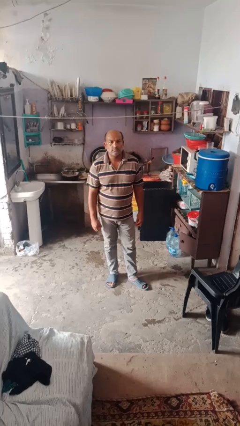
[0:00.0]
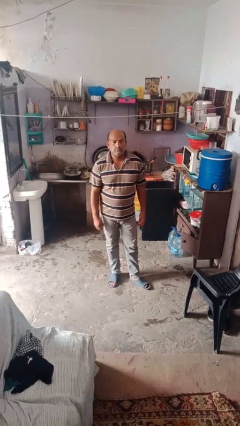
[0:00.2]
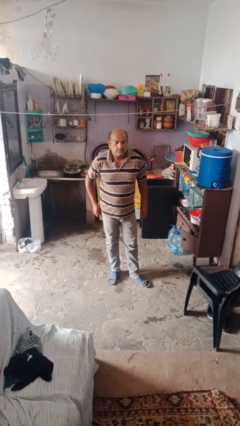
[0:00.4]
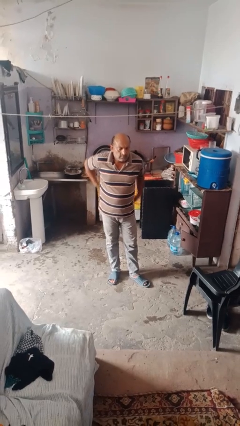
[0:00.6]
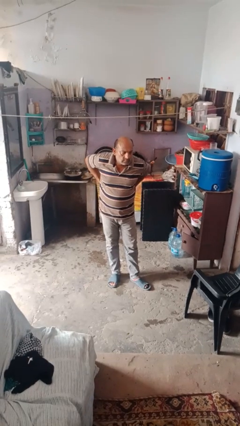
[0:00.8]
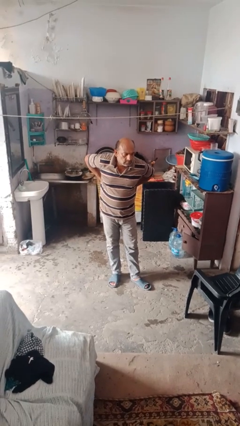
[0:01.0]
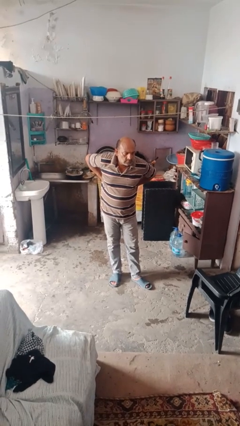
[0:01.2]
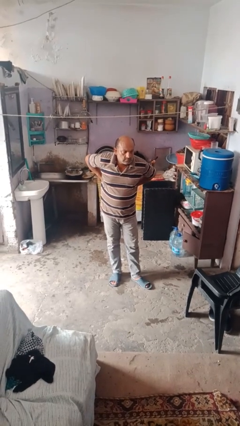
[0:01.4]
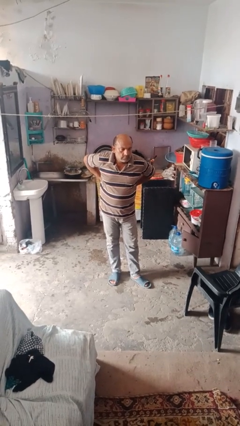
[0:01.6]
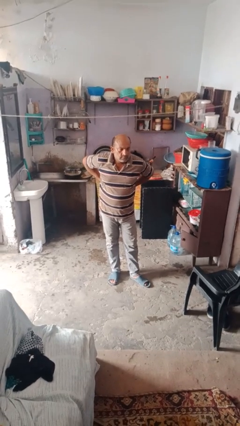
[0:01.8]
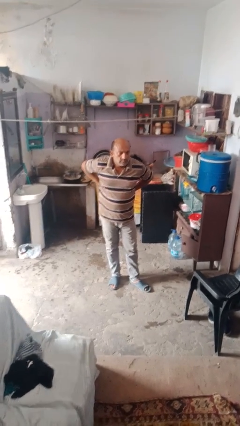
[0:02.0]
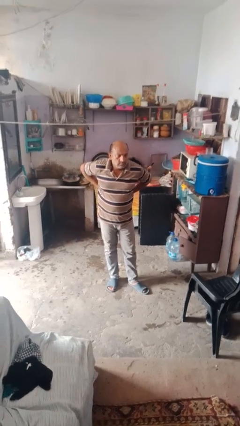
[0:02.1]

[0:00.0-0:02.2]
person stretches back

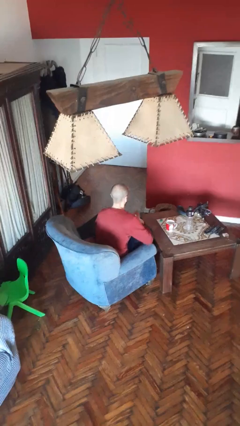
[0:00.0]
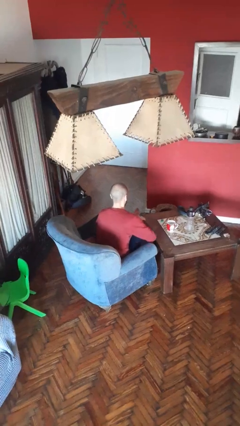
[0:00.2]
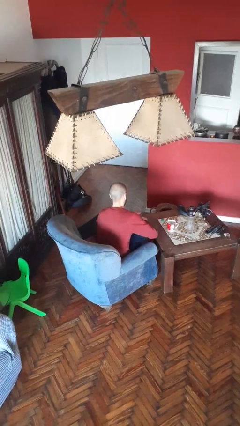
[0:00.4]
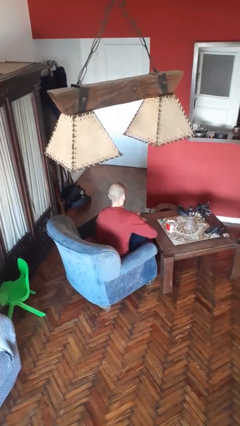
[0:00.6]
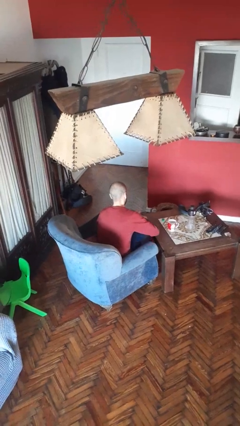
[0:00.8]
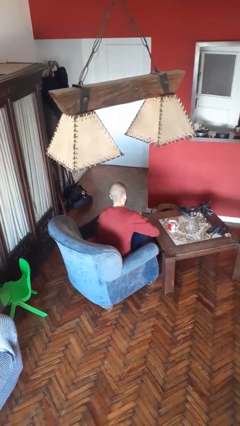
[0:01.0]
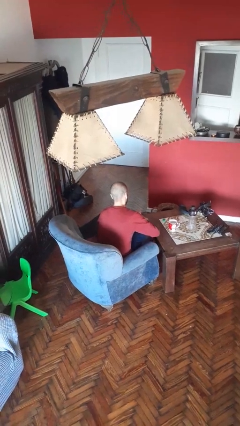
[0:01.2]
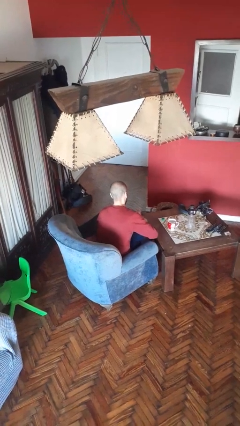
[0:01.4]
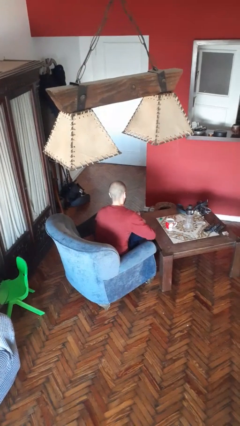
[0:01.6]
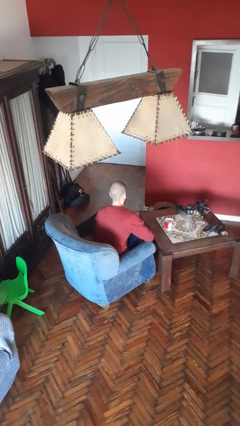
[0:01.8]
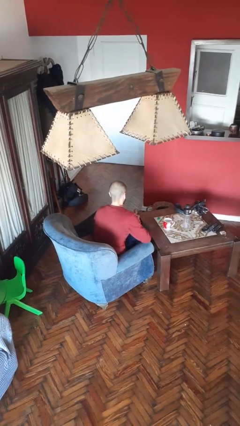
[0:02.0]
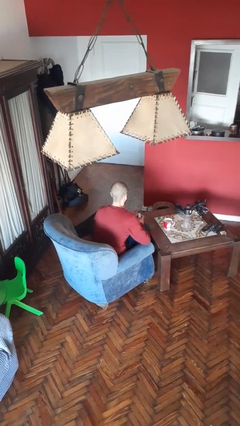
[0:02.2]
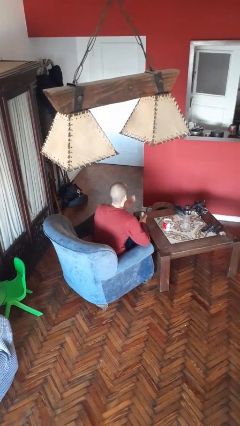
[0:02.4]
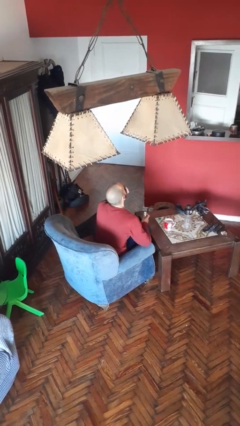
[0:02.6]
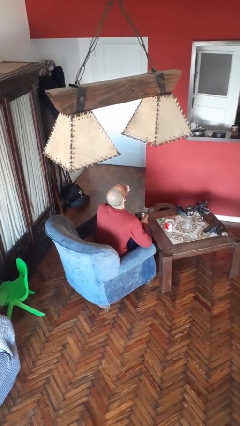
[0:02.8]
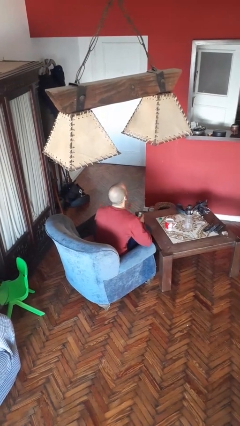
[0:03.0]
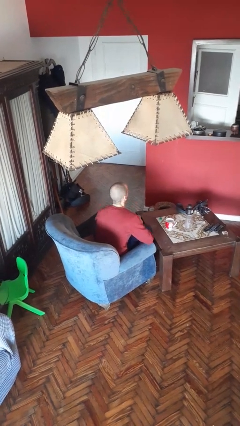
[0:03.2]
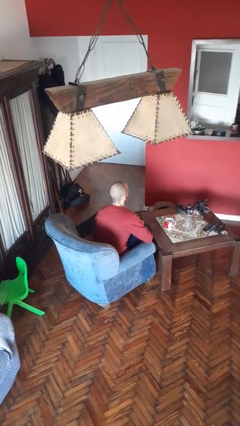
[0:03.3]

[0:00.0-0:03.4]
person takes medicine pills

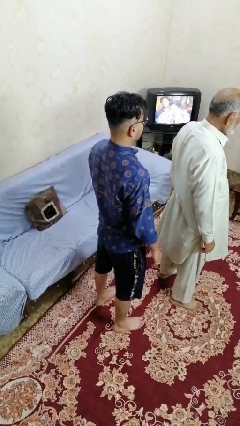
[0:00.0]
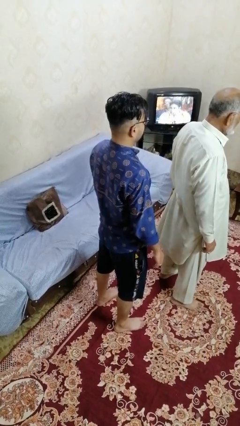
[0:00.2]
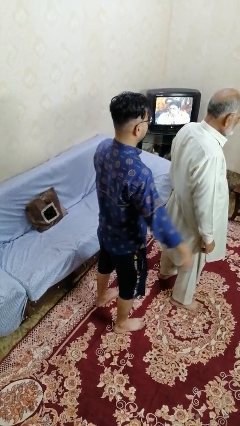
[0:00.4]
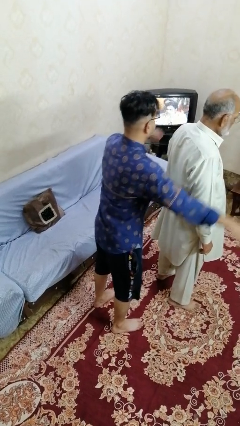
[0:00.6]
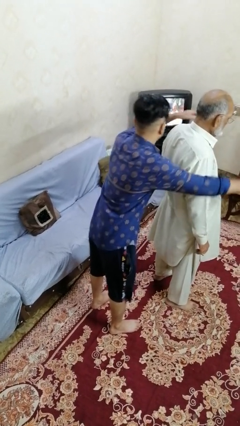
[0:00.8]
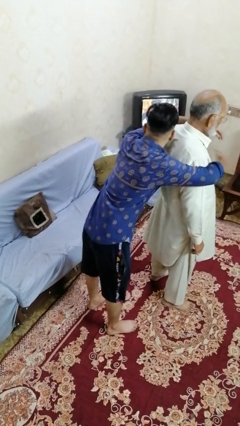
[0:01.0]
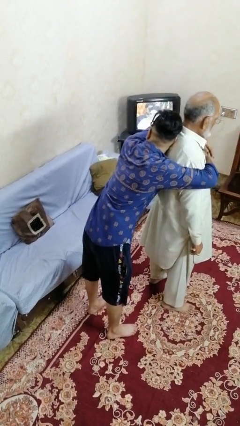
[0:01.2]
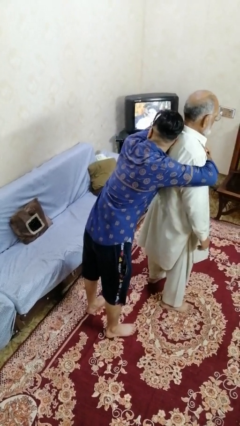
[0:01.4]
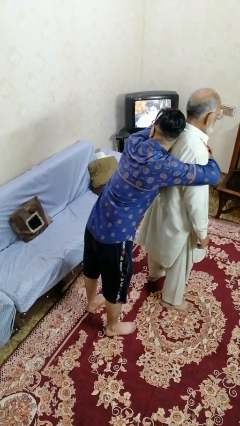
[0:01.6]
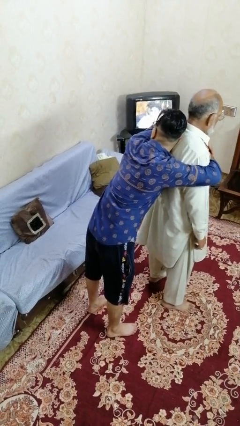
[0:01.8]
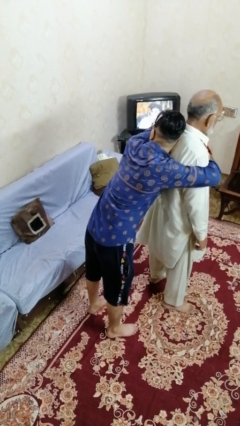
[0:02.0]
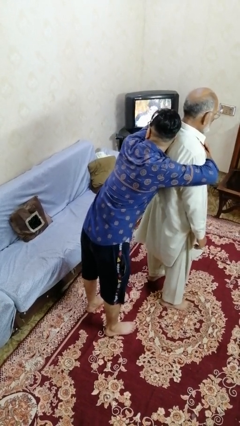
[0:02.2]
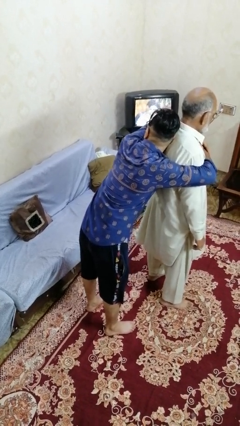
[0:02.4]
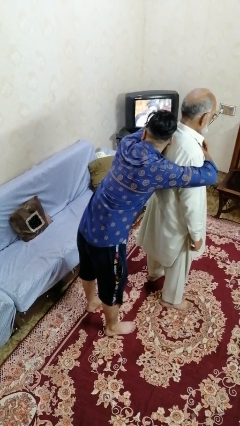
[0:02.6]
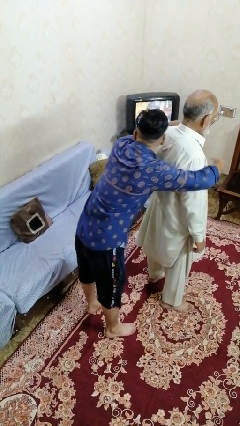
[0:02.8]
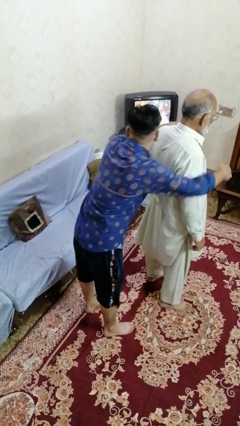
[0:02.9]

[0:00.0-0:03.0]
person hugs person from behind

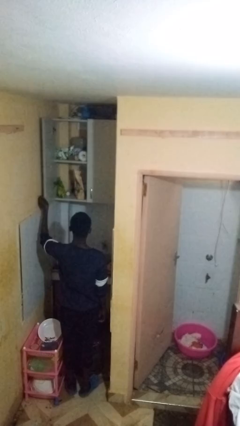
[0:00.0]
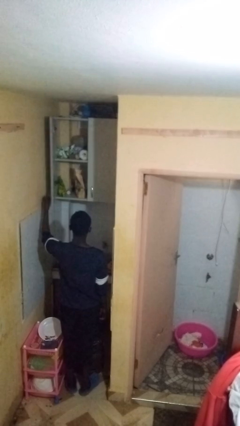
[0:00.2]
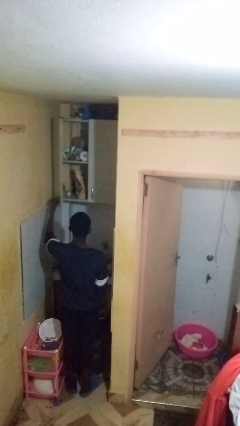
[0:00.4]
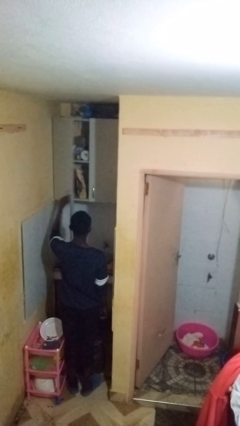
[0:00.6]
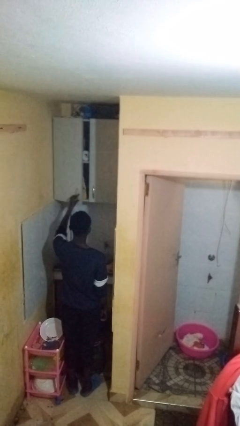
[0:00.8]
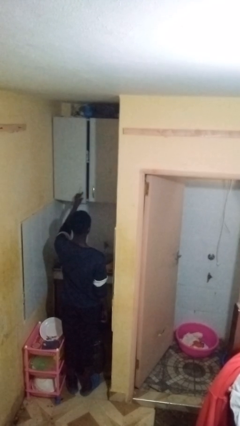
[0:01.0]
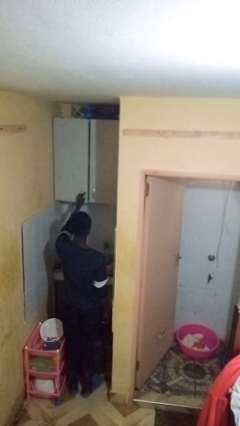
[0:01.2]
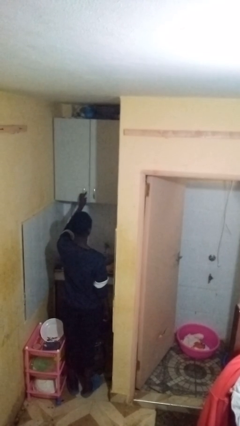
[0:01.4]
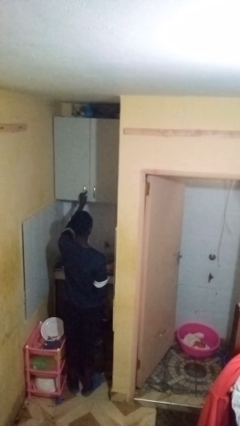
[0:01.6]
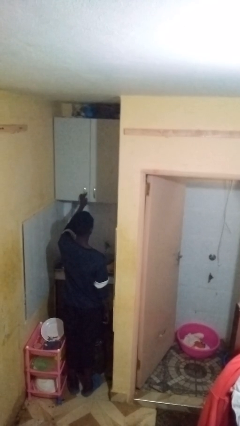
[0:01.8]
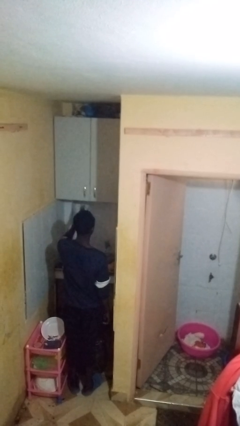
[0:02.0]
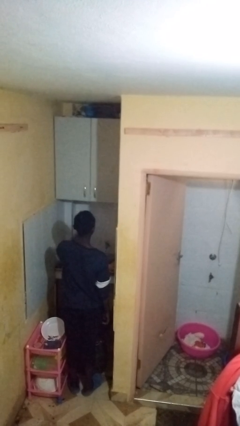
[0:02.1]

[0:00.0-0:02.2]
person closes cabinet

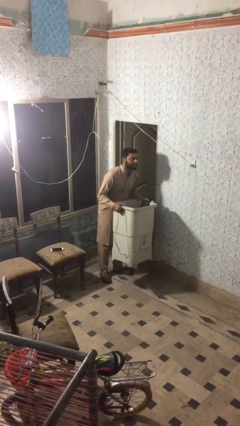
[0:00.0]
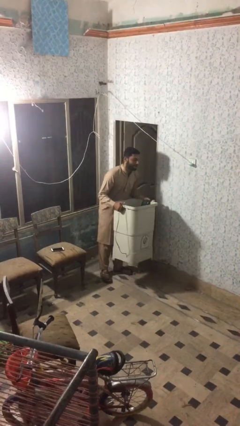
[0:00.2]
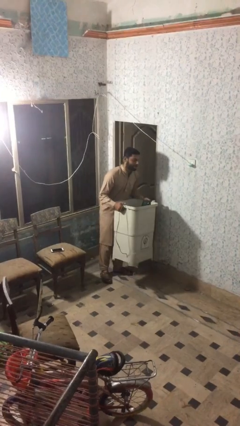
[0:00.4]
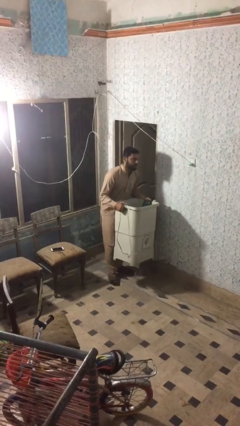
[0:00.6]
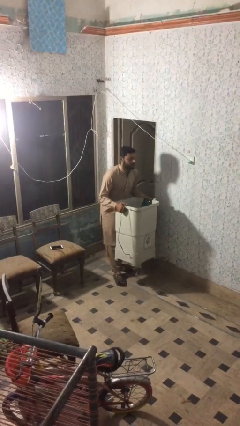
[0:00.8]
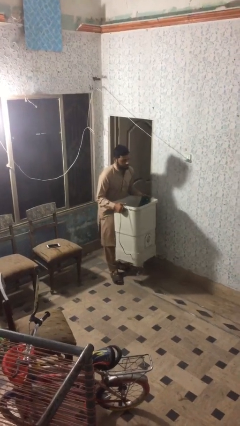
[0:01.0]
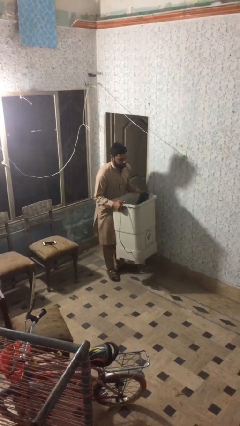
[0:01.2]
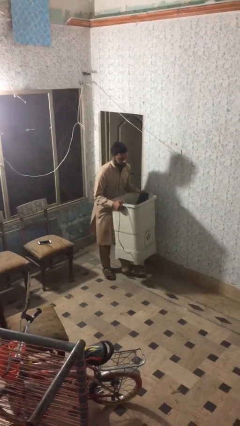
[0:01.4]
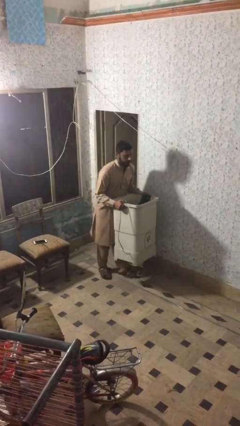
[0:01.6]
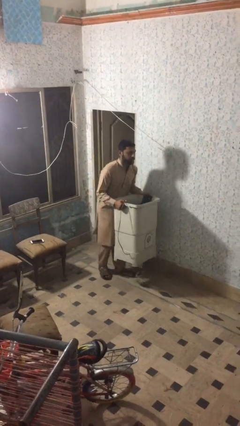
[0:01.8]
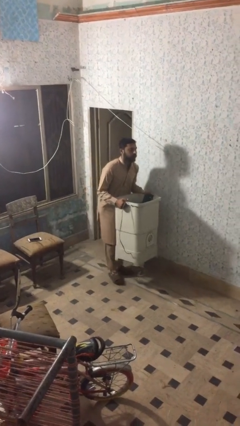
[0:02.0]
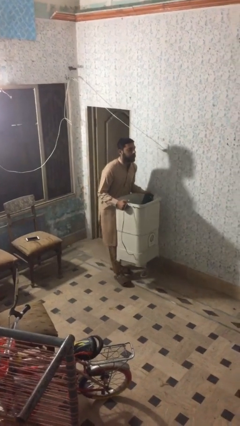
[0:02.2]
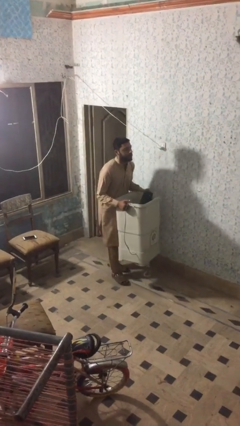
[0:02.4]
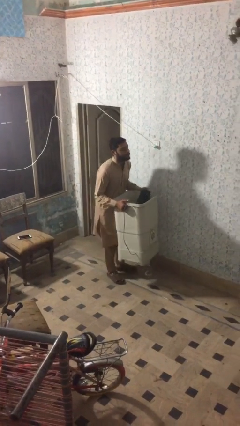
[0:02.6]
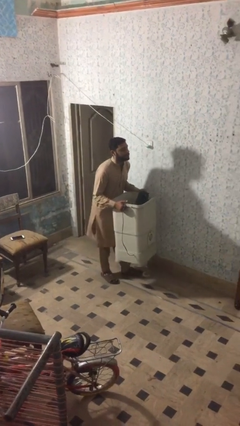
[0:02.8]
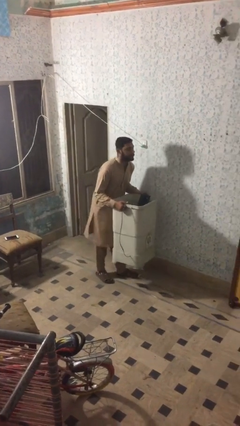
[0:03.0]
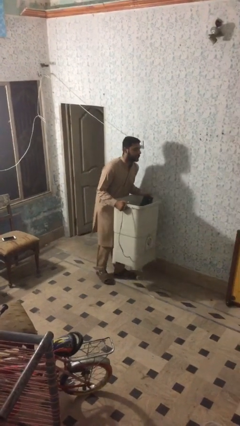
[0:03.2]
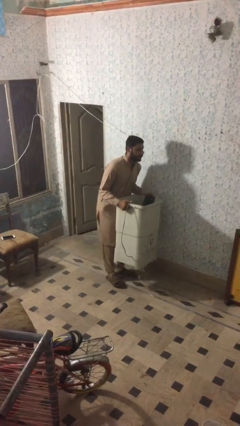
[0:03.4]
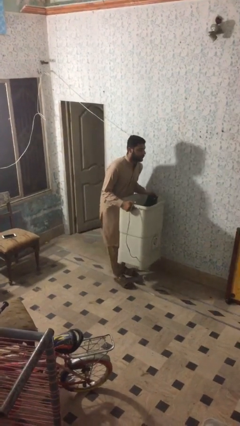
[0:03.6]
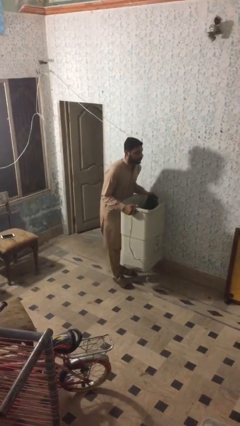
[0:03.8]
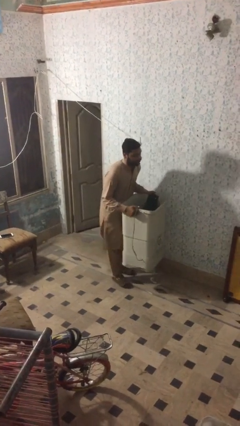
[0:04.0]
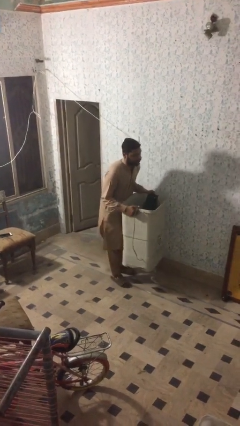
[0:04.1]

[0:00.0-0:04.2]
person carries heavy object

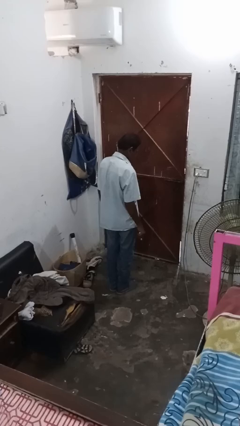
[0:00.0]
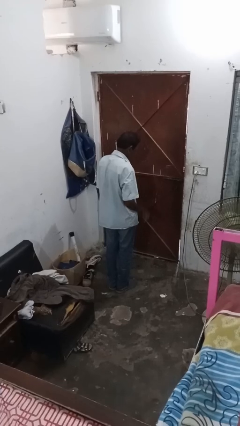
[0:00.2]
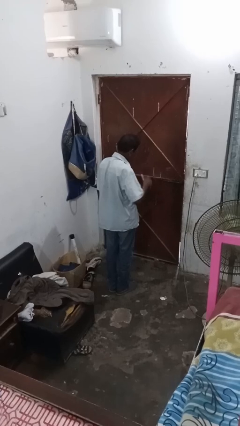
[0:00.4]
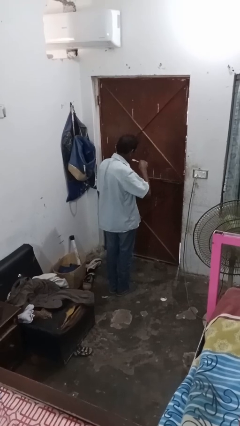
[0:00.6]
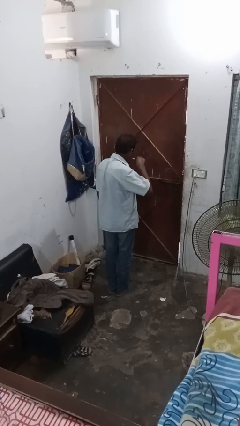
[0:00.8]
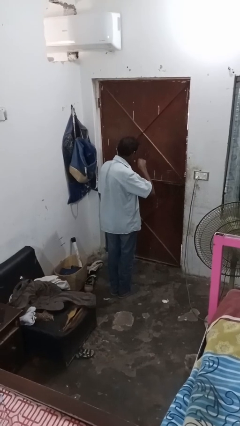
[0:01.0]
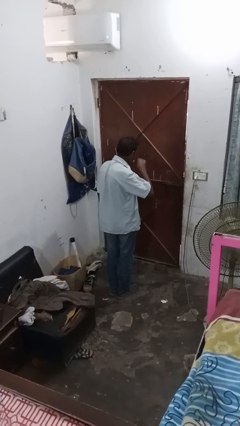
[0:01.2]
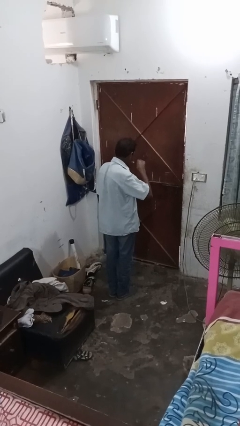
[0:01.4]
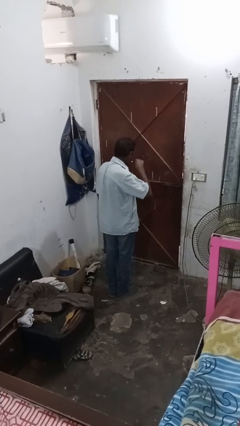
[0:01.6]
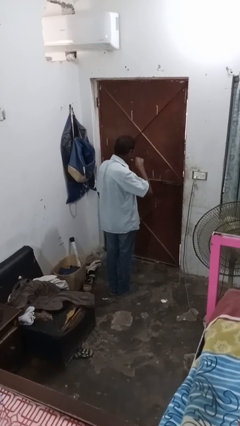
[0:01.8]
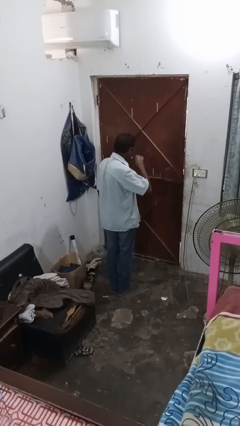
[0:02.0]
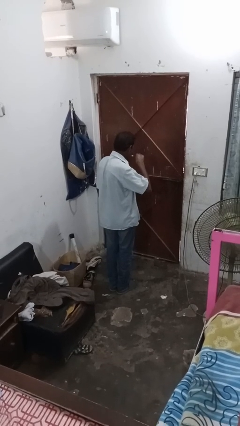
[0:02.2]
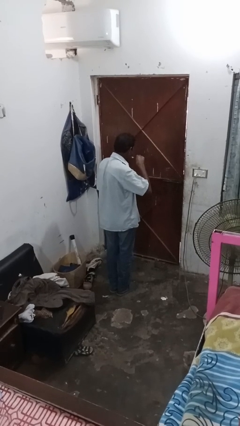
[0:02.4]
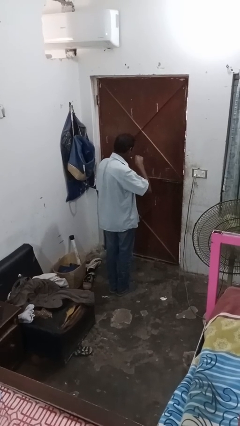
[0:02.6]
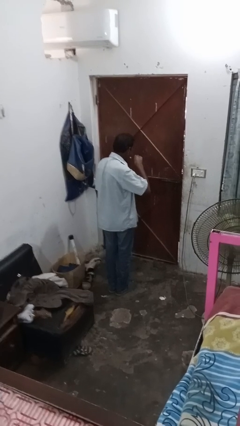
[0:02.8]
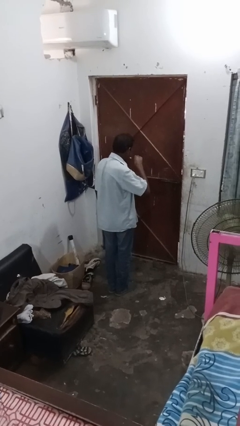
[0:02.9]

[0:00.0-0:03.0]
person brushes teeth
